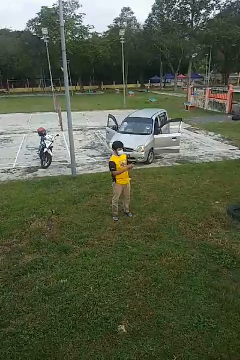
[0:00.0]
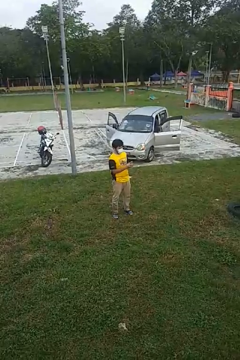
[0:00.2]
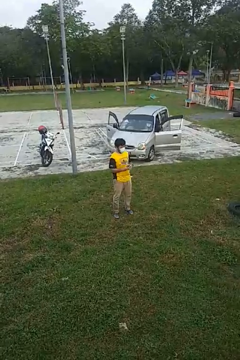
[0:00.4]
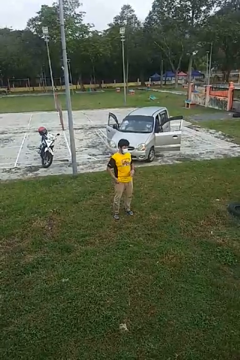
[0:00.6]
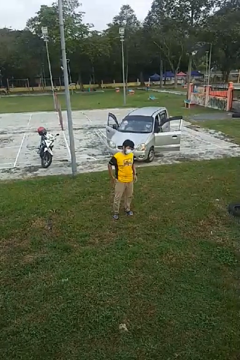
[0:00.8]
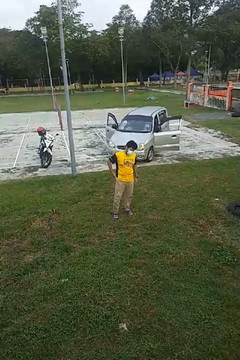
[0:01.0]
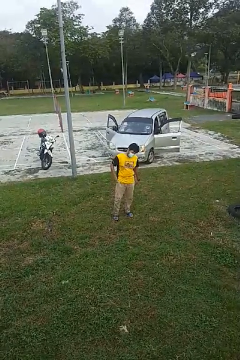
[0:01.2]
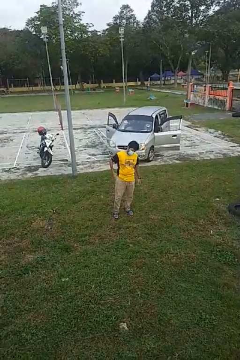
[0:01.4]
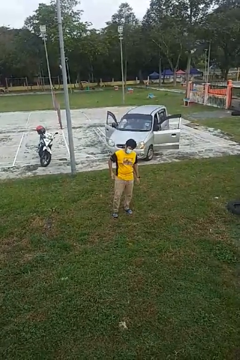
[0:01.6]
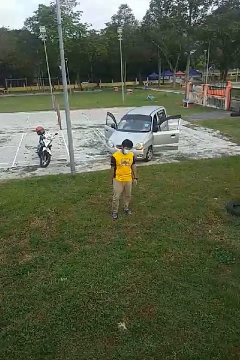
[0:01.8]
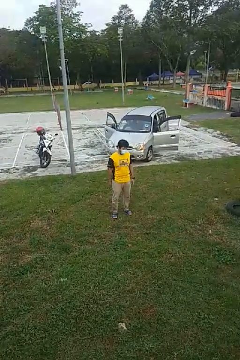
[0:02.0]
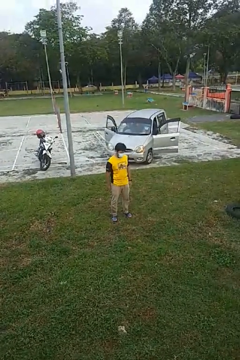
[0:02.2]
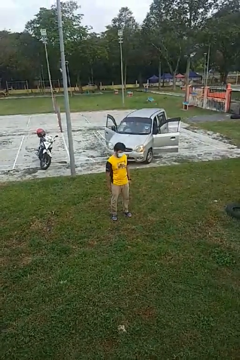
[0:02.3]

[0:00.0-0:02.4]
person puts phone into pocket

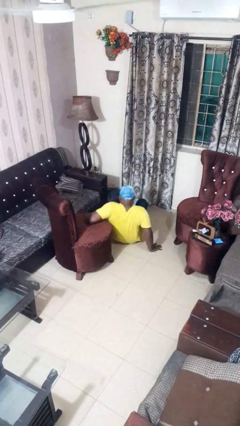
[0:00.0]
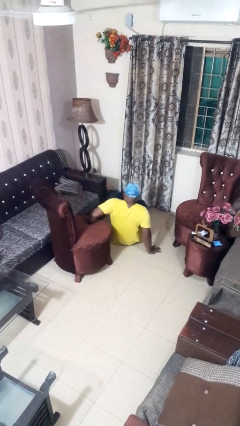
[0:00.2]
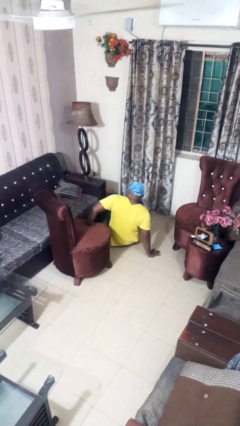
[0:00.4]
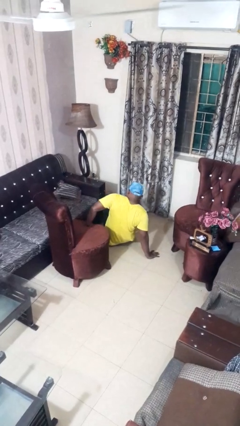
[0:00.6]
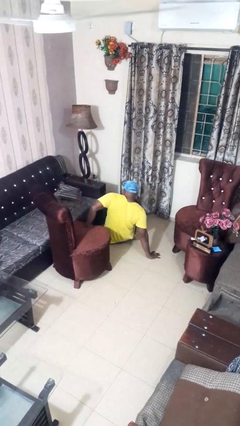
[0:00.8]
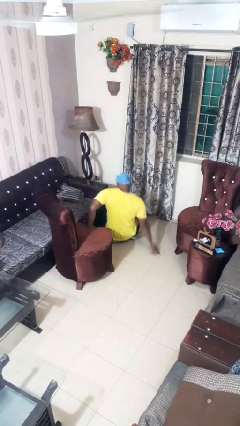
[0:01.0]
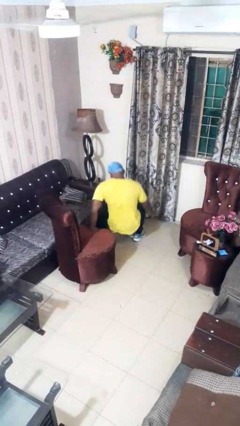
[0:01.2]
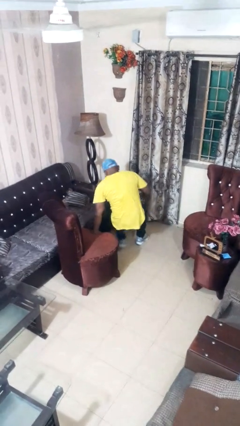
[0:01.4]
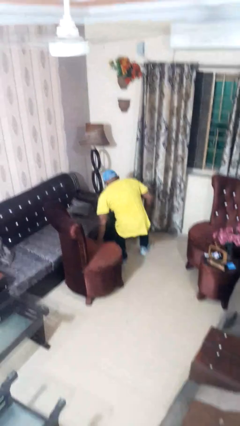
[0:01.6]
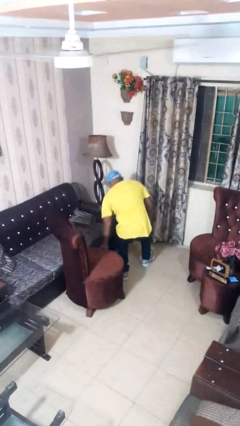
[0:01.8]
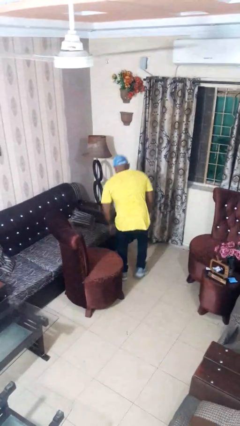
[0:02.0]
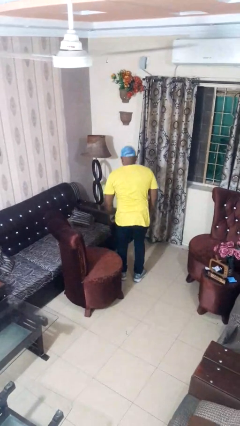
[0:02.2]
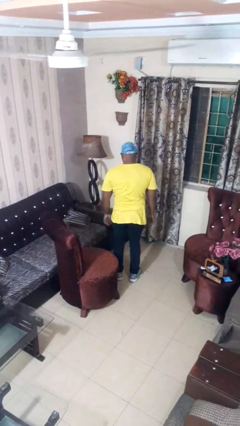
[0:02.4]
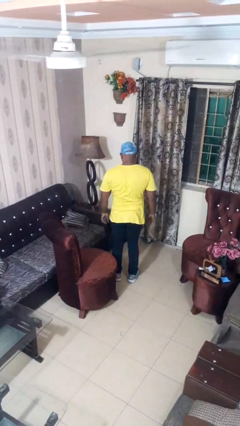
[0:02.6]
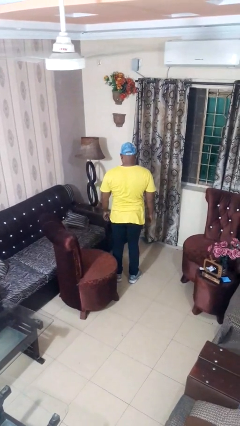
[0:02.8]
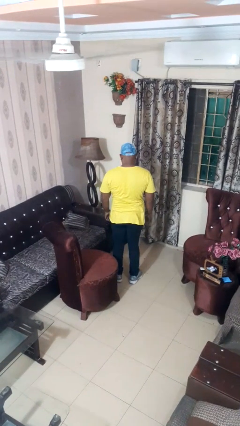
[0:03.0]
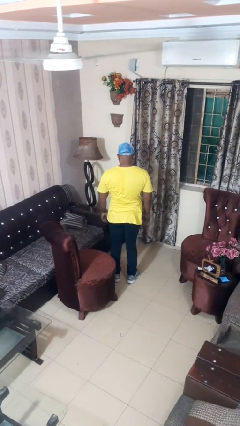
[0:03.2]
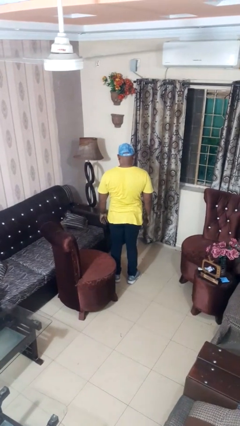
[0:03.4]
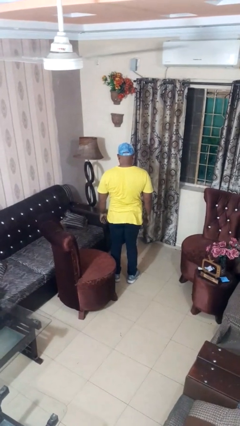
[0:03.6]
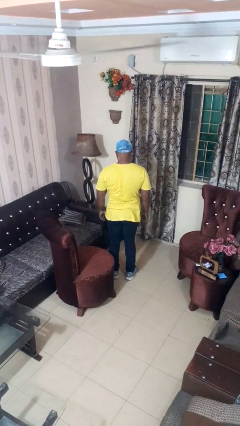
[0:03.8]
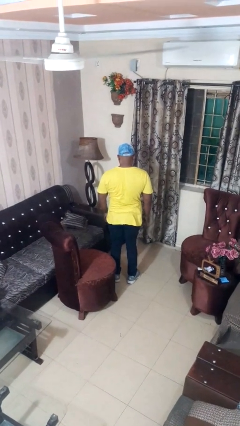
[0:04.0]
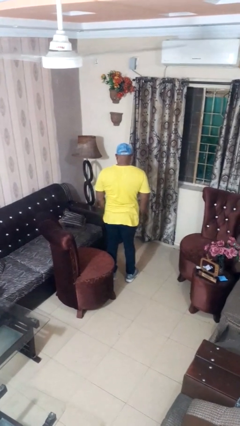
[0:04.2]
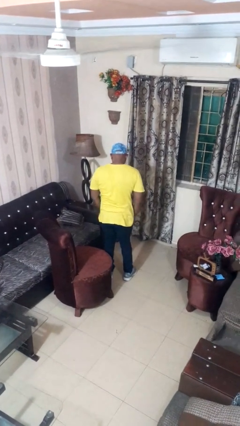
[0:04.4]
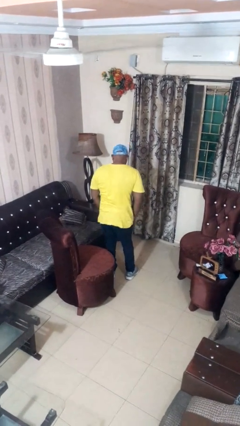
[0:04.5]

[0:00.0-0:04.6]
person stands up from floor

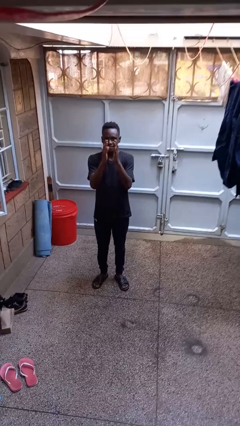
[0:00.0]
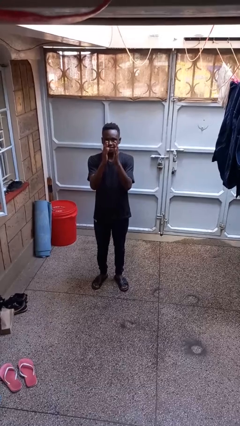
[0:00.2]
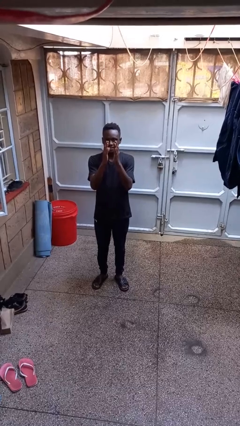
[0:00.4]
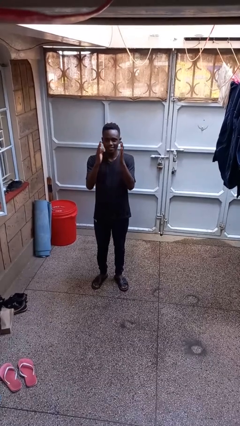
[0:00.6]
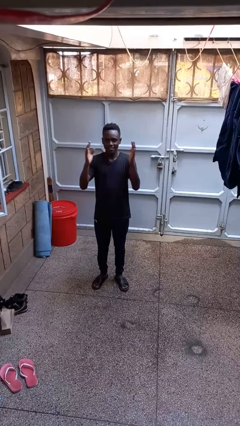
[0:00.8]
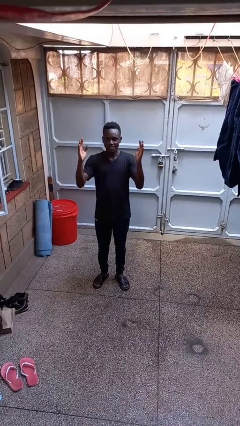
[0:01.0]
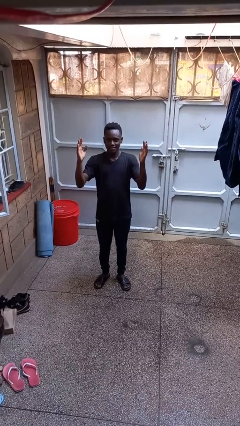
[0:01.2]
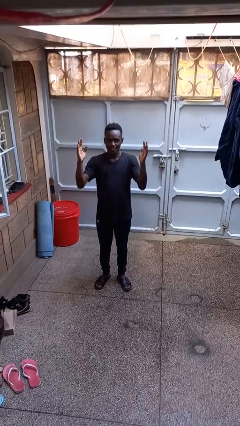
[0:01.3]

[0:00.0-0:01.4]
person gestures zoom out

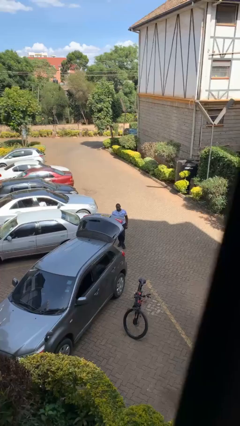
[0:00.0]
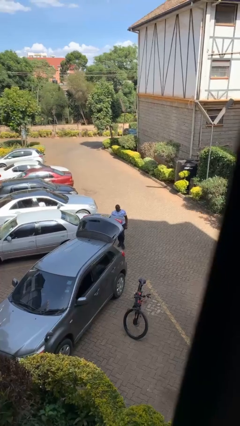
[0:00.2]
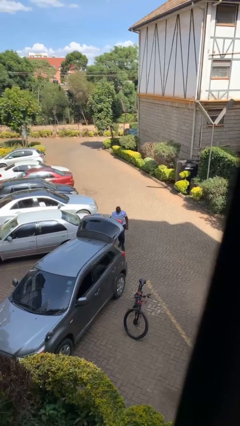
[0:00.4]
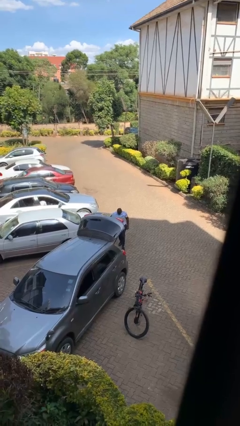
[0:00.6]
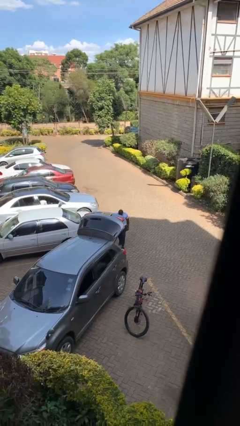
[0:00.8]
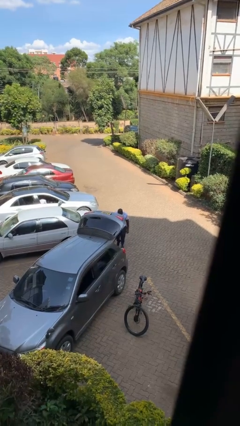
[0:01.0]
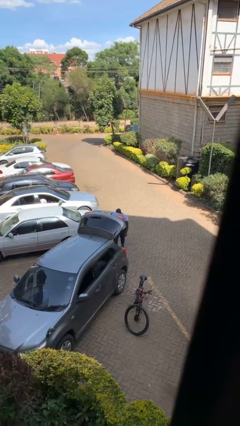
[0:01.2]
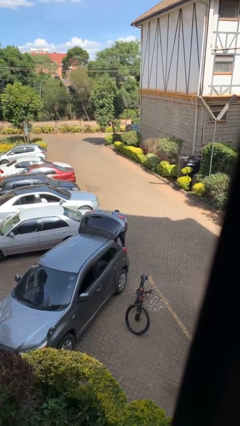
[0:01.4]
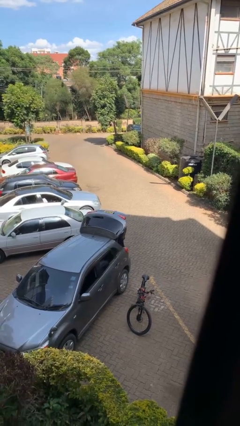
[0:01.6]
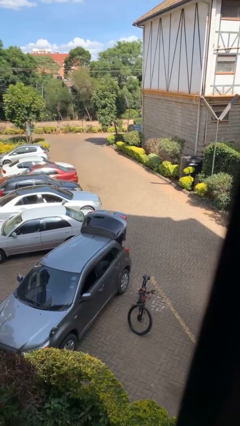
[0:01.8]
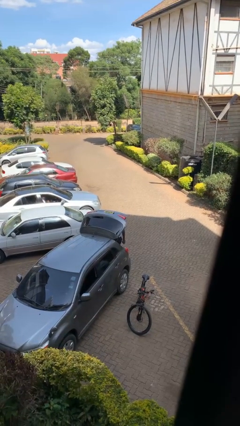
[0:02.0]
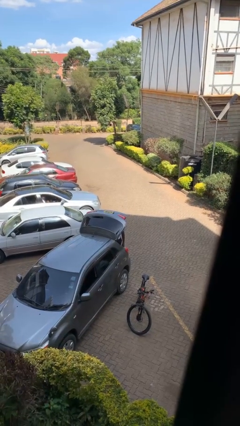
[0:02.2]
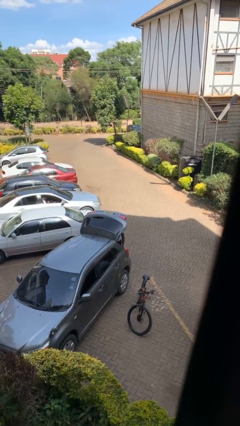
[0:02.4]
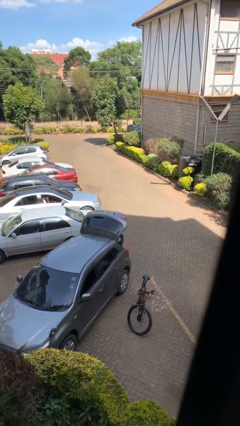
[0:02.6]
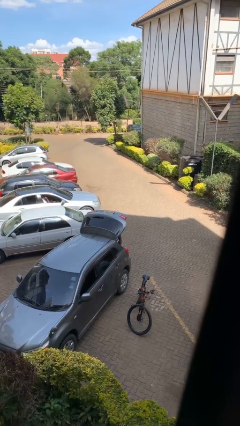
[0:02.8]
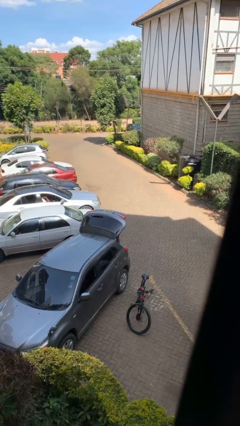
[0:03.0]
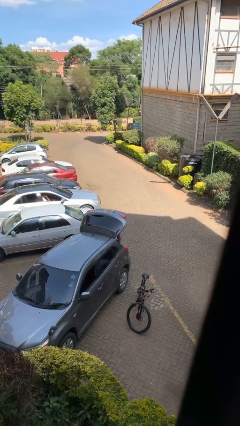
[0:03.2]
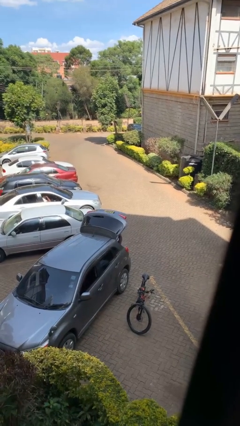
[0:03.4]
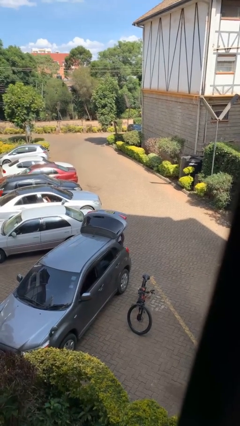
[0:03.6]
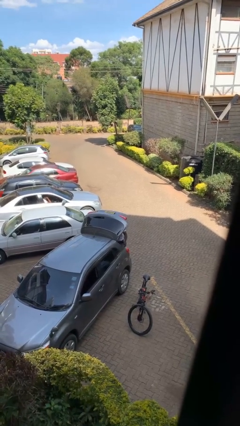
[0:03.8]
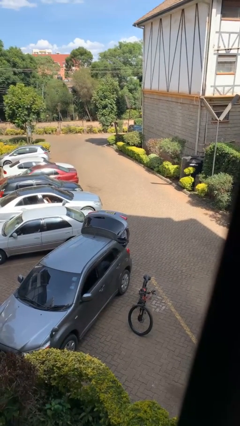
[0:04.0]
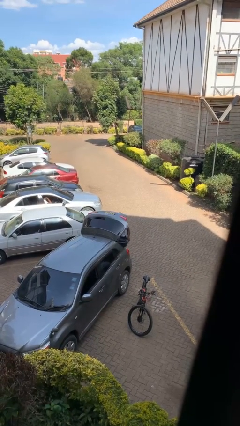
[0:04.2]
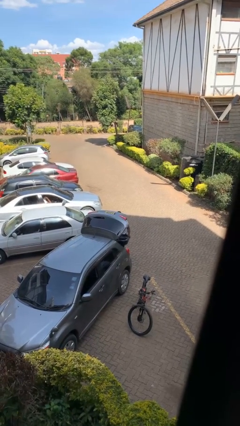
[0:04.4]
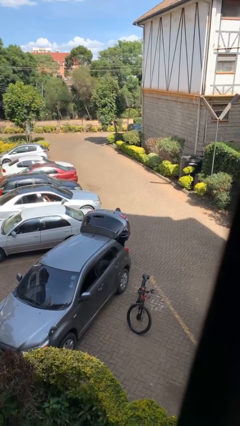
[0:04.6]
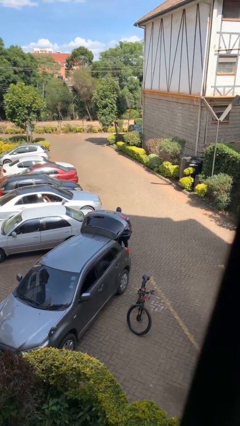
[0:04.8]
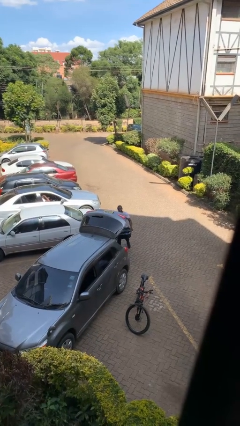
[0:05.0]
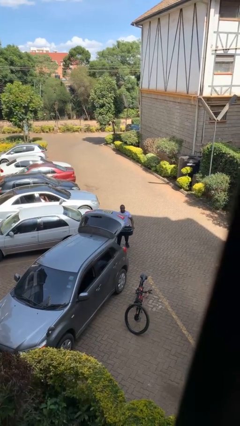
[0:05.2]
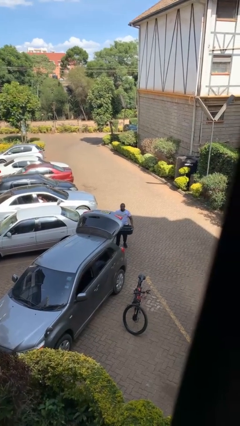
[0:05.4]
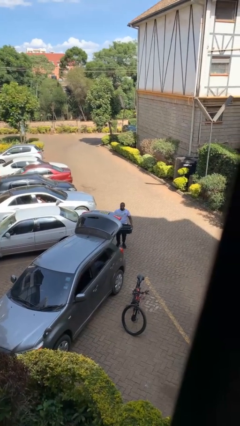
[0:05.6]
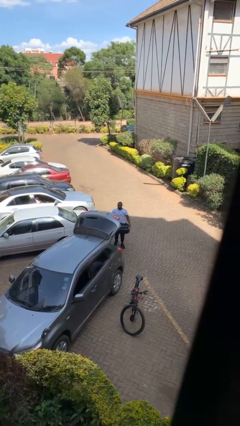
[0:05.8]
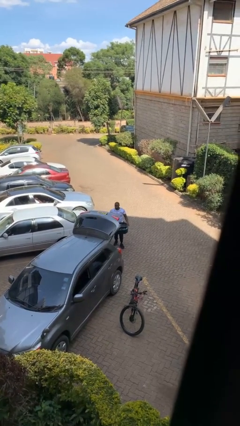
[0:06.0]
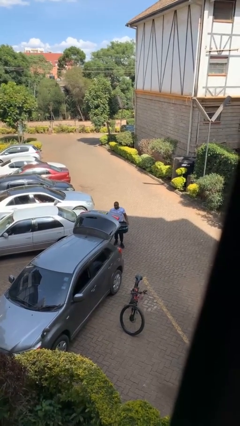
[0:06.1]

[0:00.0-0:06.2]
person unloads car

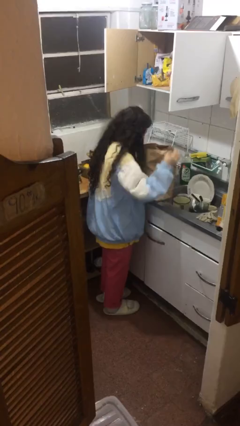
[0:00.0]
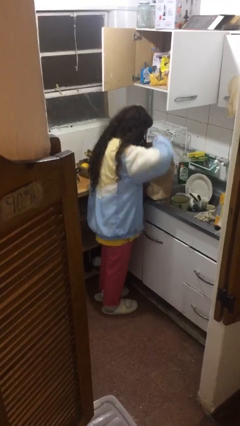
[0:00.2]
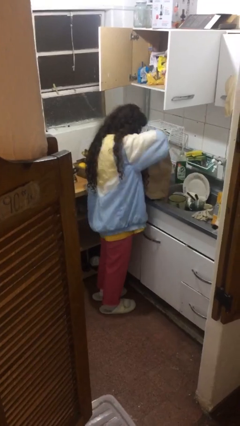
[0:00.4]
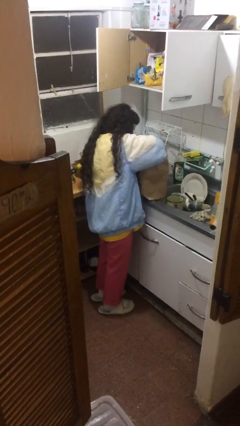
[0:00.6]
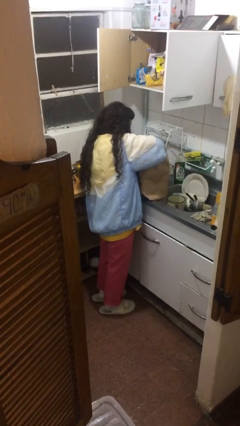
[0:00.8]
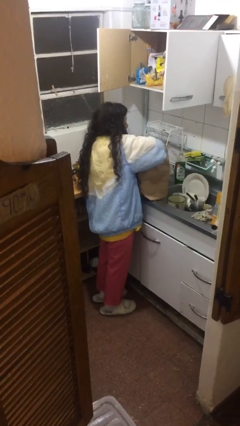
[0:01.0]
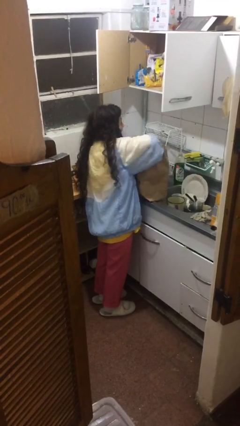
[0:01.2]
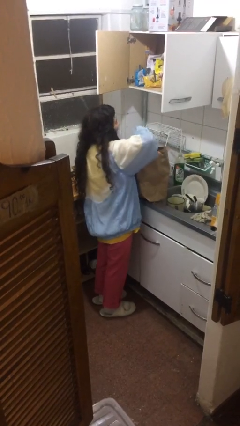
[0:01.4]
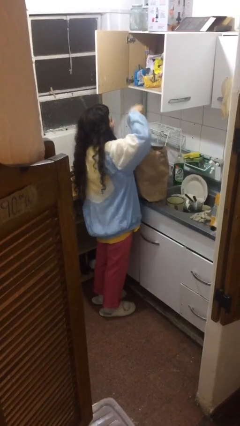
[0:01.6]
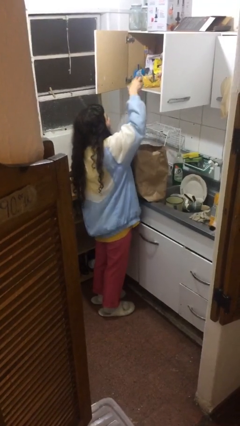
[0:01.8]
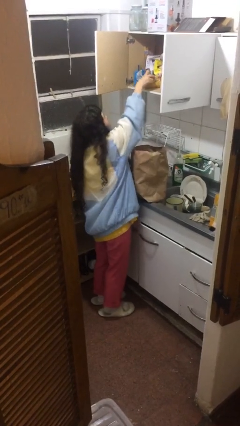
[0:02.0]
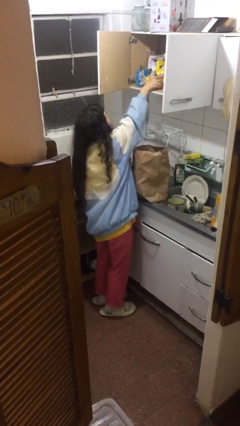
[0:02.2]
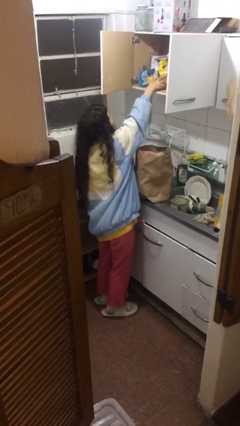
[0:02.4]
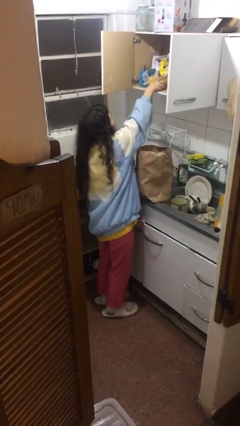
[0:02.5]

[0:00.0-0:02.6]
person loads groceries into cabinet

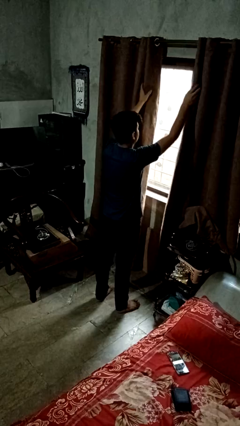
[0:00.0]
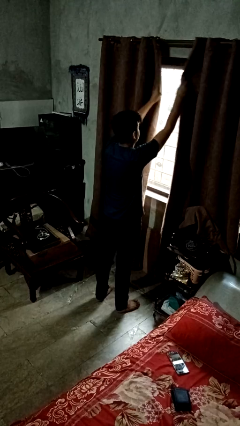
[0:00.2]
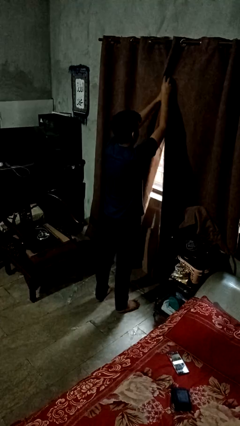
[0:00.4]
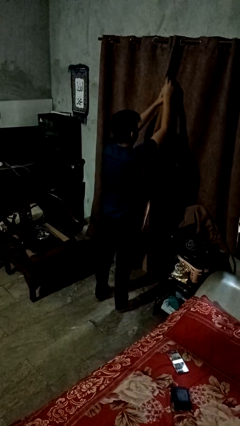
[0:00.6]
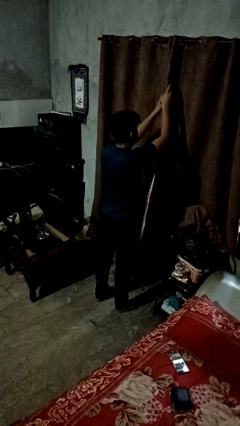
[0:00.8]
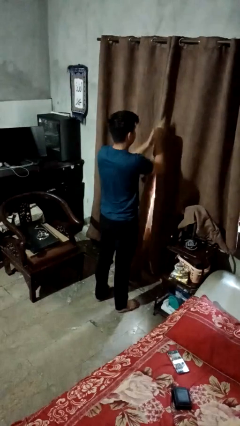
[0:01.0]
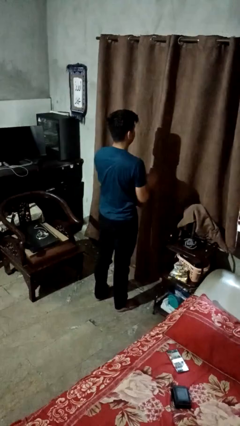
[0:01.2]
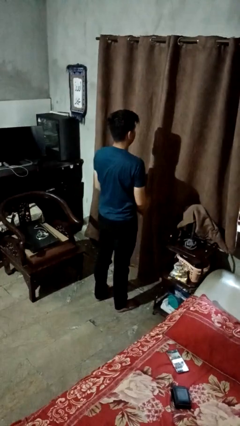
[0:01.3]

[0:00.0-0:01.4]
person closes curtains
